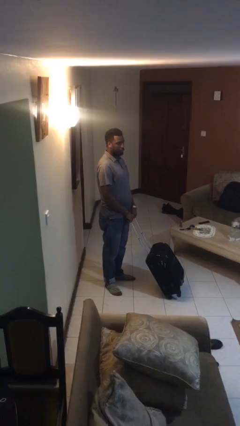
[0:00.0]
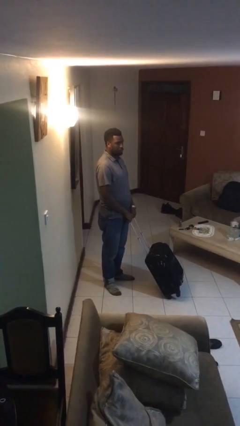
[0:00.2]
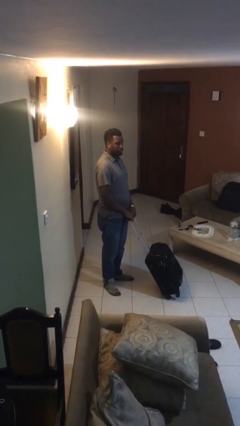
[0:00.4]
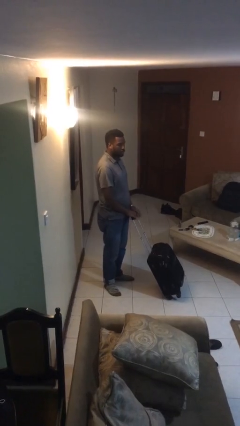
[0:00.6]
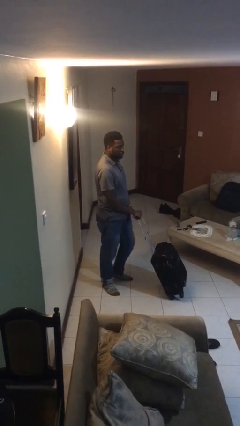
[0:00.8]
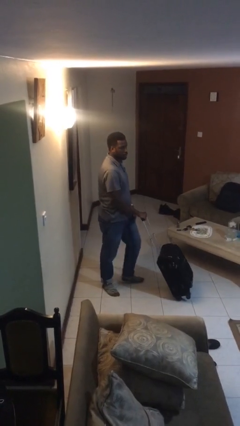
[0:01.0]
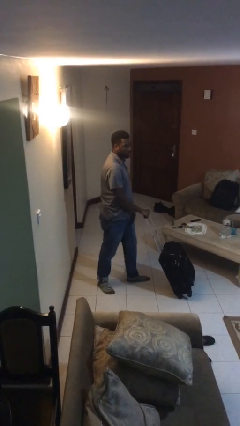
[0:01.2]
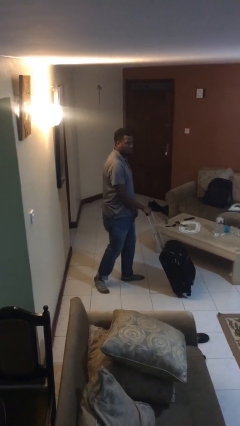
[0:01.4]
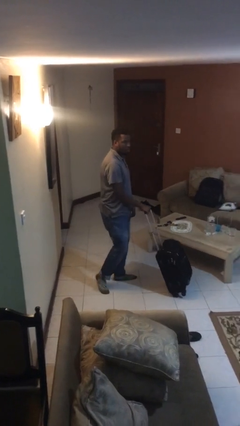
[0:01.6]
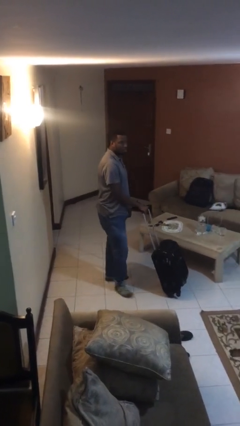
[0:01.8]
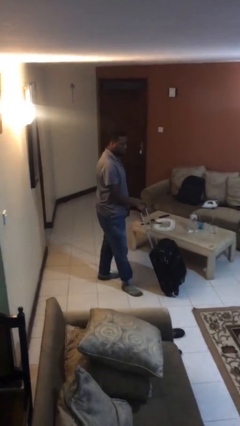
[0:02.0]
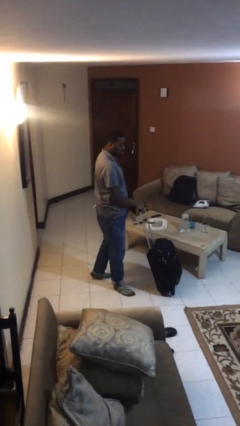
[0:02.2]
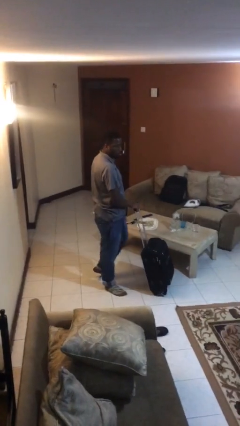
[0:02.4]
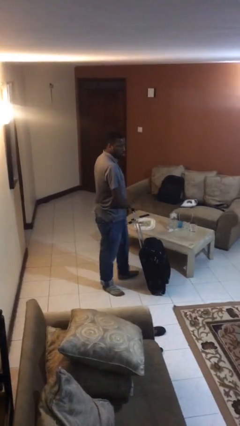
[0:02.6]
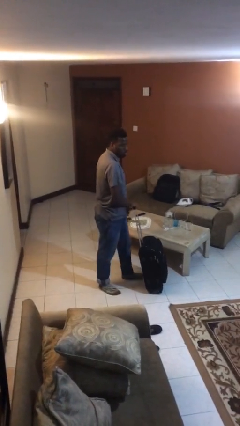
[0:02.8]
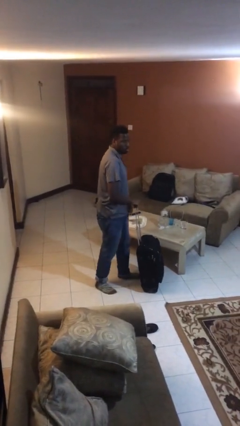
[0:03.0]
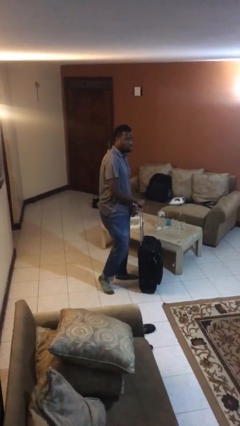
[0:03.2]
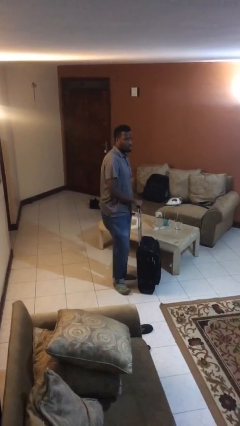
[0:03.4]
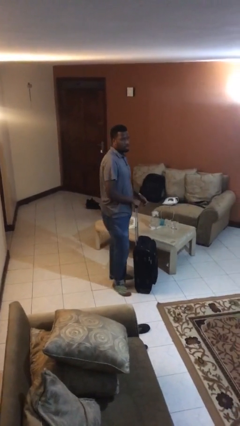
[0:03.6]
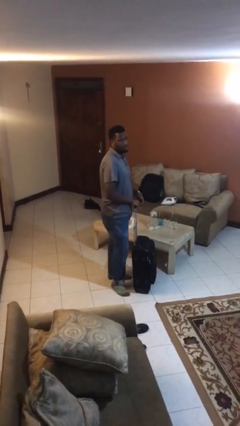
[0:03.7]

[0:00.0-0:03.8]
person pushes wheeled cart

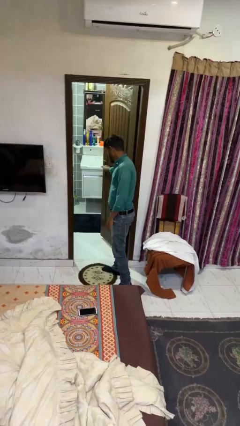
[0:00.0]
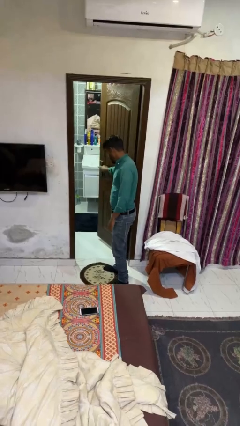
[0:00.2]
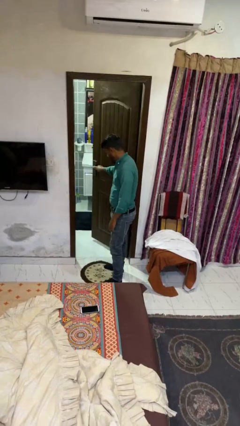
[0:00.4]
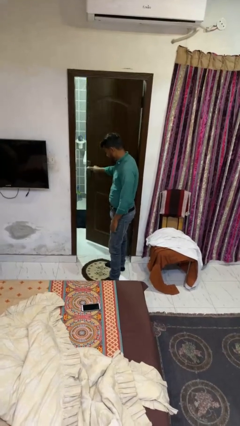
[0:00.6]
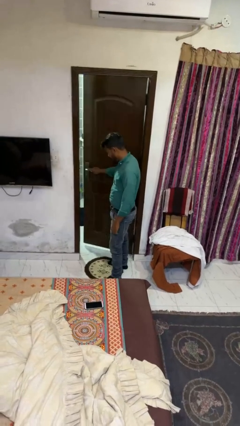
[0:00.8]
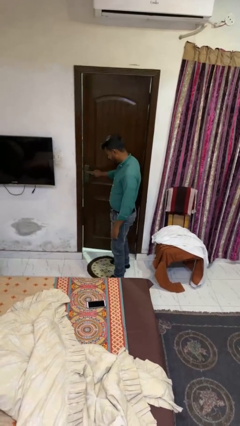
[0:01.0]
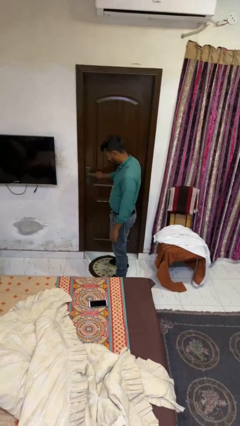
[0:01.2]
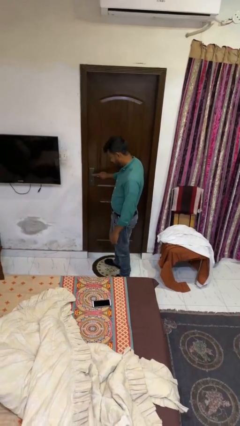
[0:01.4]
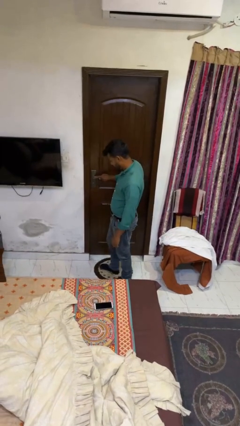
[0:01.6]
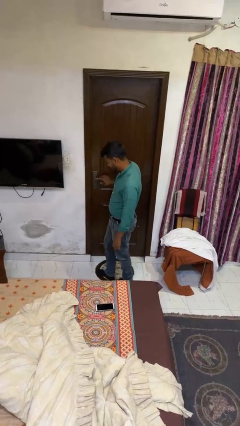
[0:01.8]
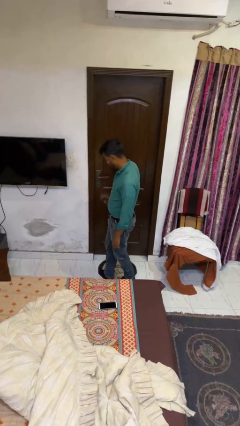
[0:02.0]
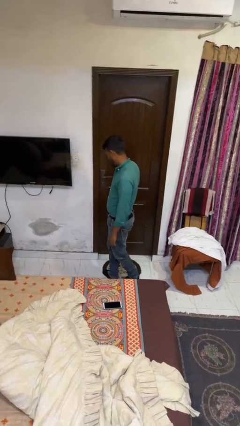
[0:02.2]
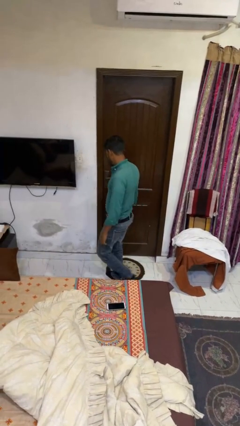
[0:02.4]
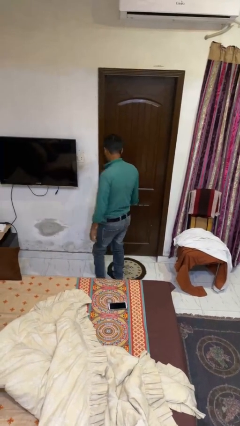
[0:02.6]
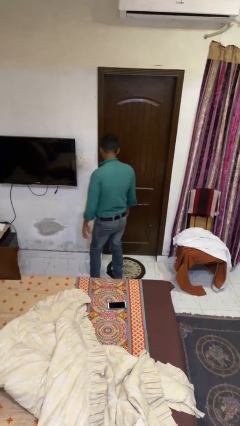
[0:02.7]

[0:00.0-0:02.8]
person closes facility door

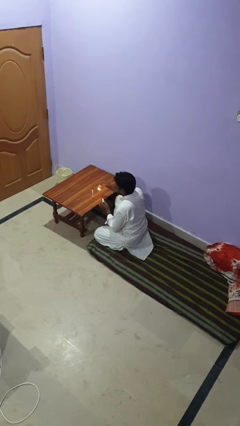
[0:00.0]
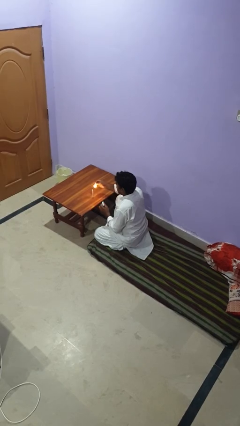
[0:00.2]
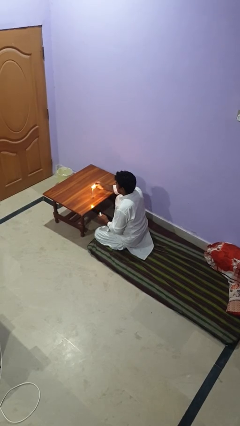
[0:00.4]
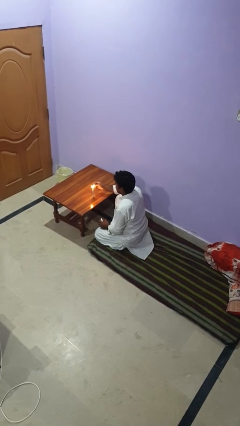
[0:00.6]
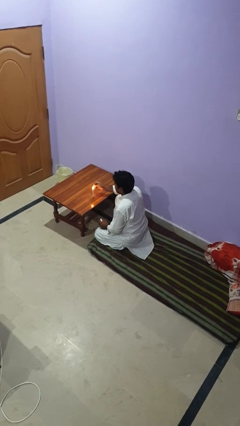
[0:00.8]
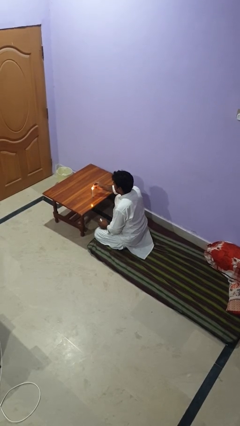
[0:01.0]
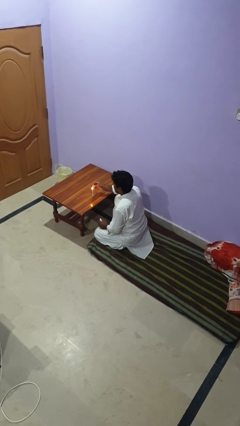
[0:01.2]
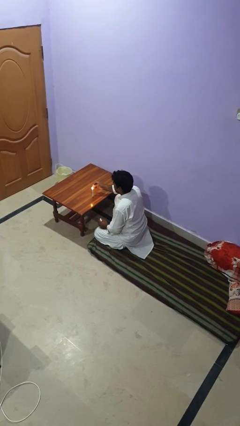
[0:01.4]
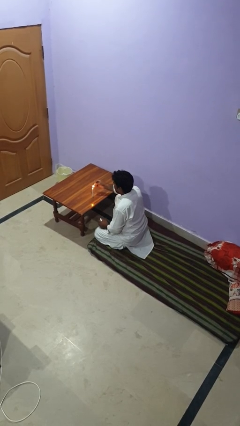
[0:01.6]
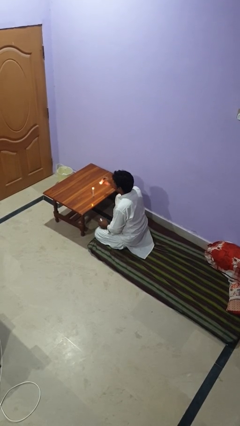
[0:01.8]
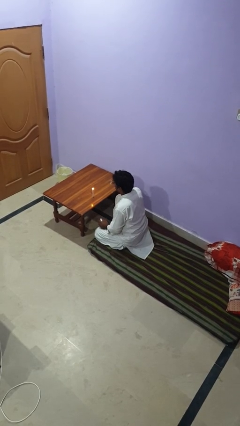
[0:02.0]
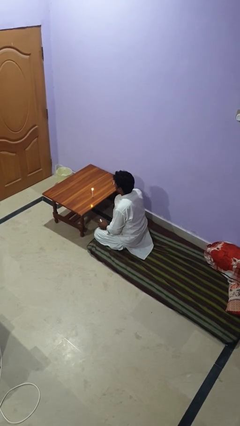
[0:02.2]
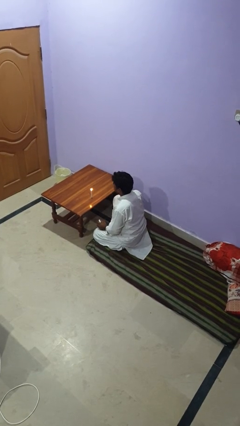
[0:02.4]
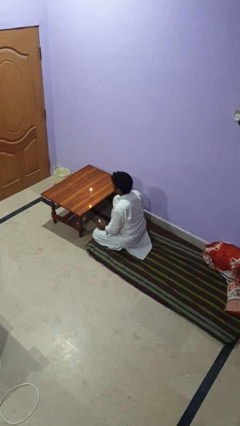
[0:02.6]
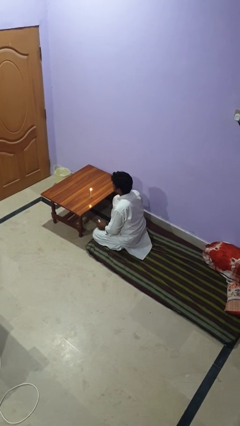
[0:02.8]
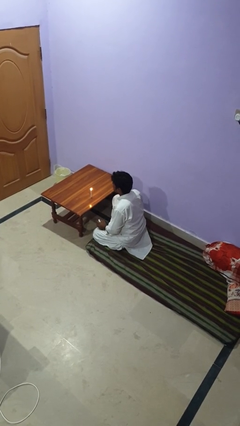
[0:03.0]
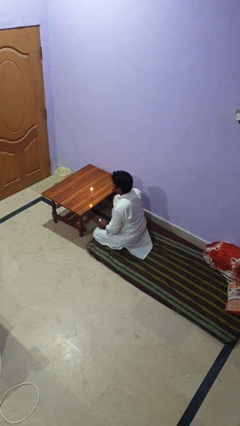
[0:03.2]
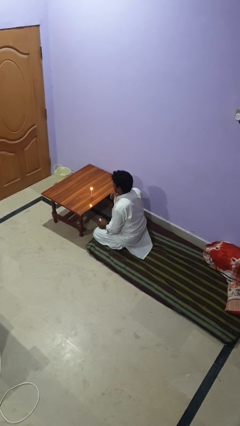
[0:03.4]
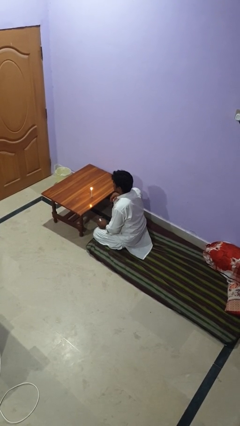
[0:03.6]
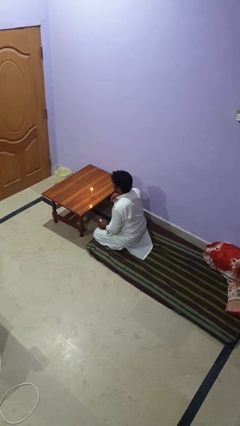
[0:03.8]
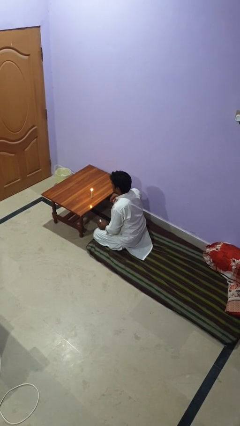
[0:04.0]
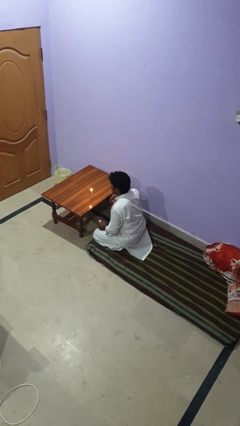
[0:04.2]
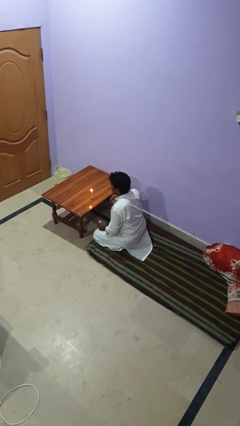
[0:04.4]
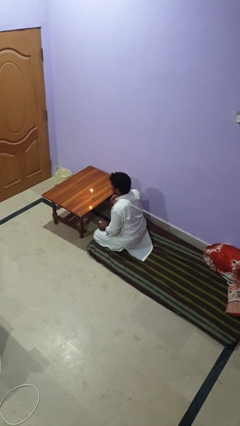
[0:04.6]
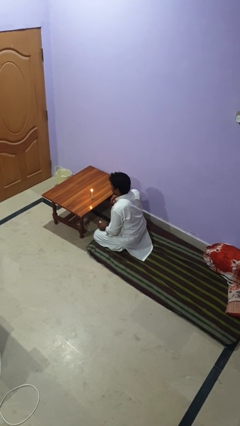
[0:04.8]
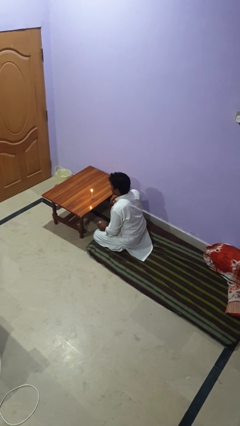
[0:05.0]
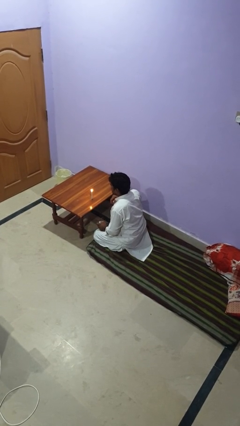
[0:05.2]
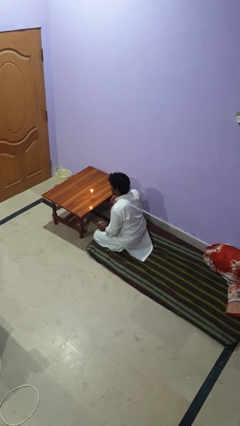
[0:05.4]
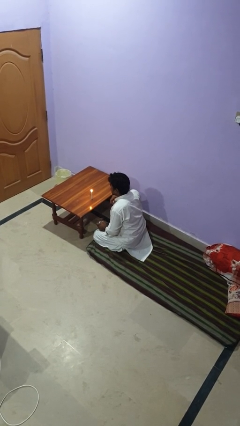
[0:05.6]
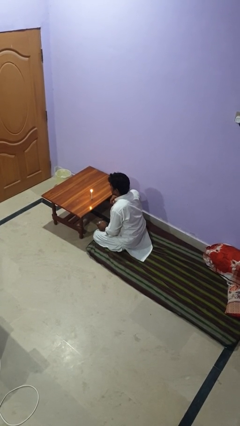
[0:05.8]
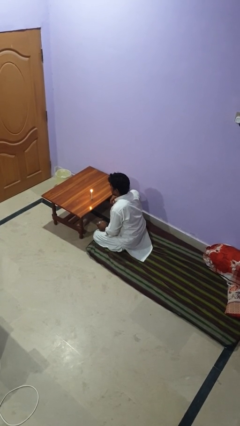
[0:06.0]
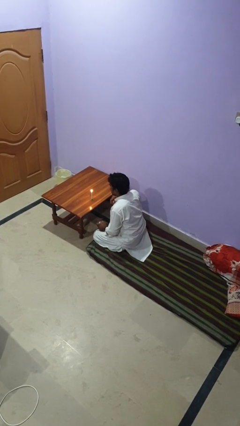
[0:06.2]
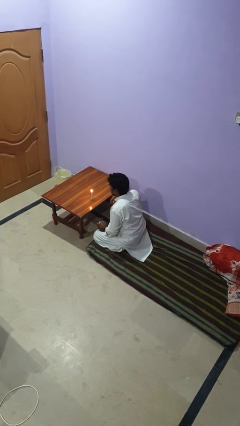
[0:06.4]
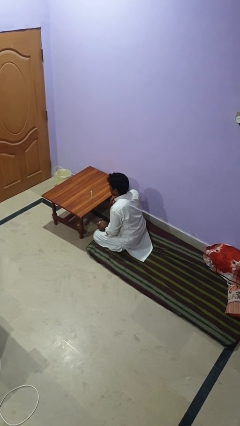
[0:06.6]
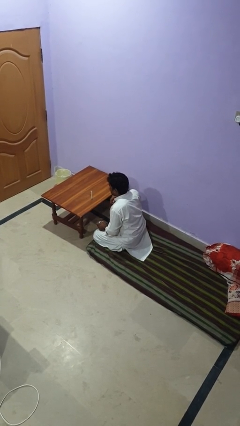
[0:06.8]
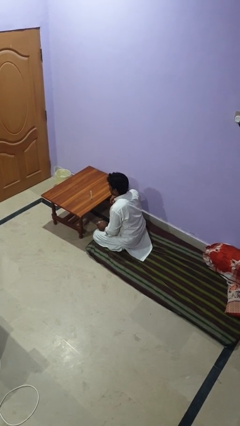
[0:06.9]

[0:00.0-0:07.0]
person lights candle

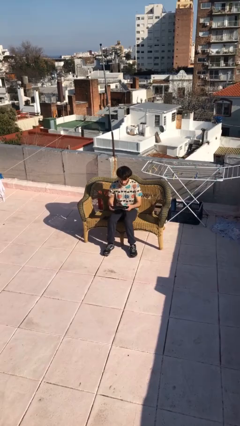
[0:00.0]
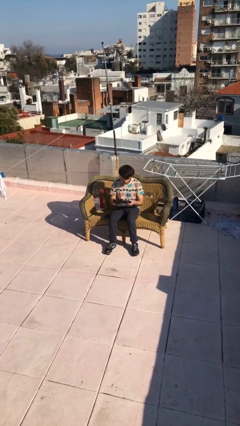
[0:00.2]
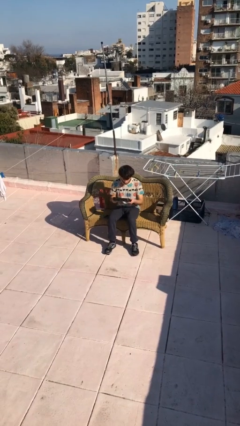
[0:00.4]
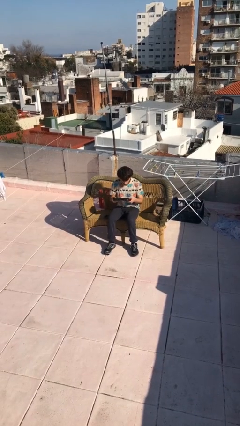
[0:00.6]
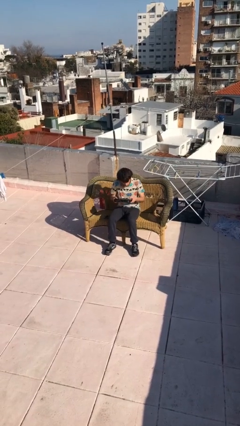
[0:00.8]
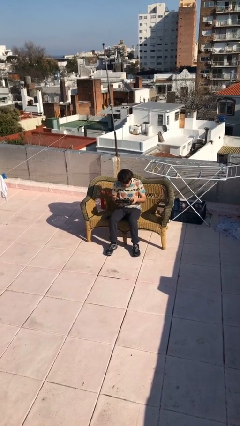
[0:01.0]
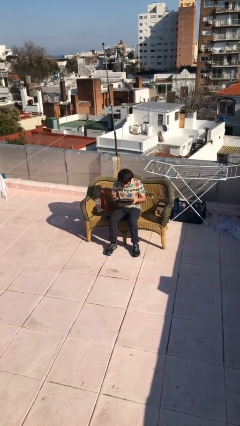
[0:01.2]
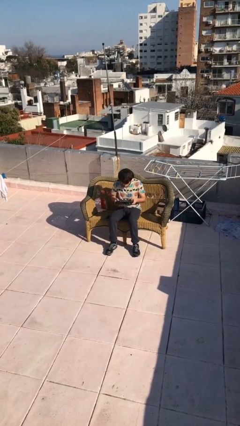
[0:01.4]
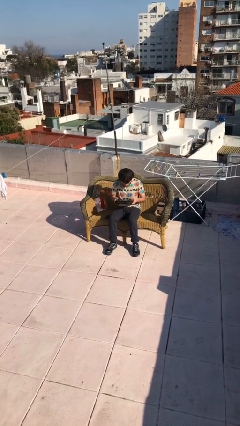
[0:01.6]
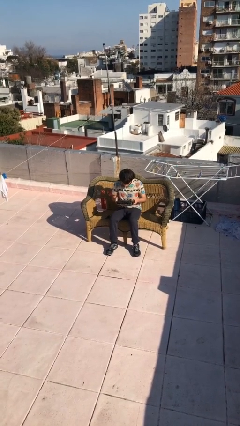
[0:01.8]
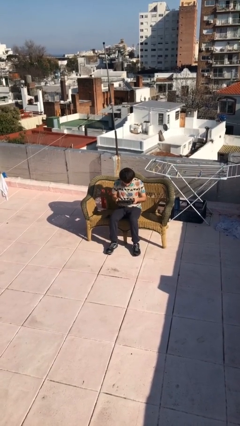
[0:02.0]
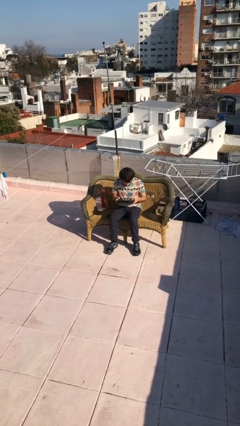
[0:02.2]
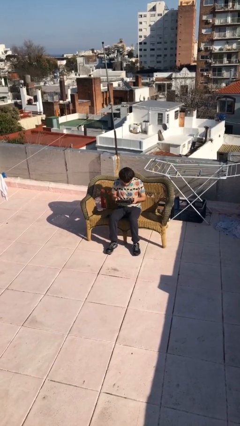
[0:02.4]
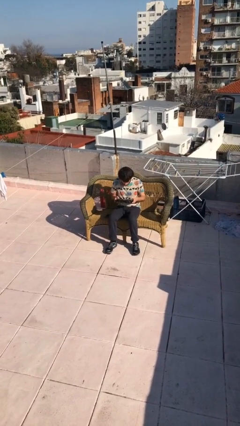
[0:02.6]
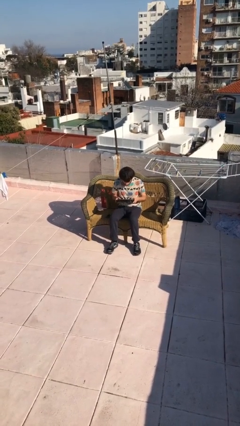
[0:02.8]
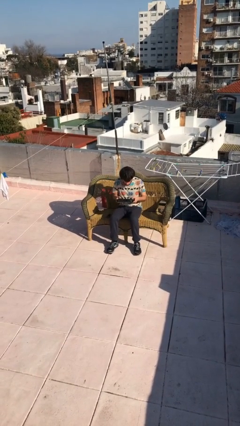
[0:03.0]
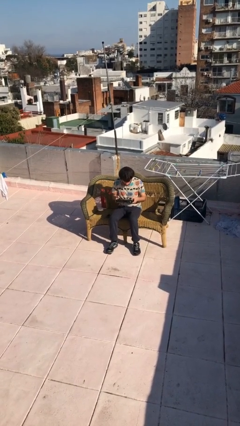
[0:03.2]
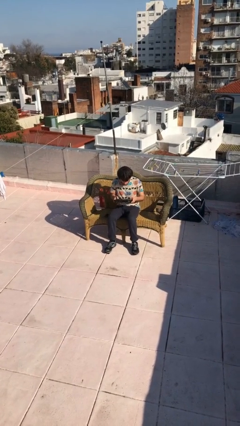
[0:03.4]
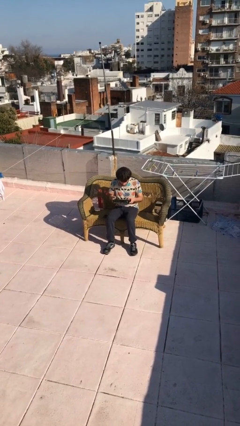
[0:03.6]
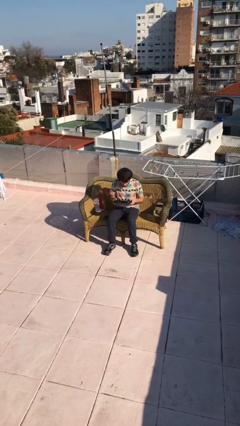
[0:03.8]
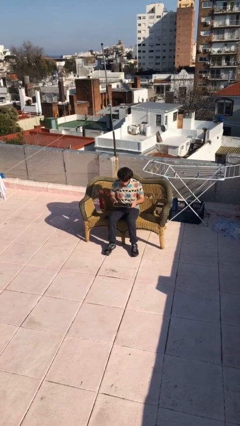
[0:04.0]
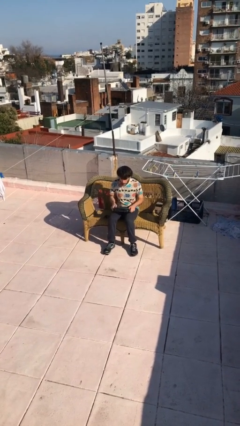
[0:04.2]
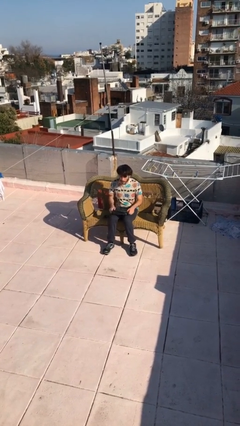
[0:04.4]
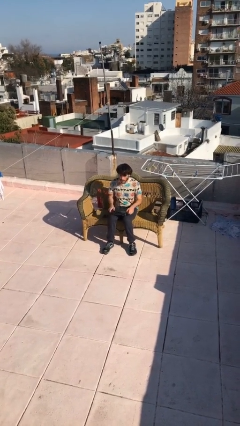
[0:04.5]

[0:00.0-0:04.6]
person interacts with handheld game
